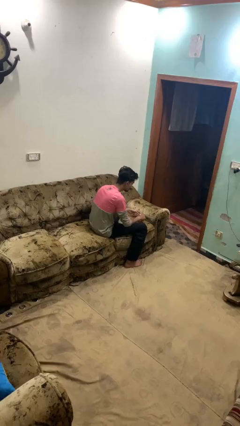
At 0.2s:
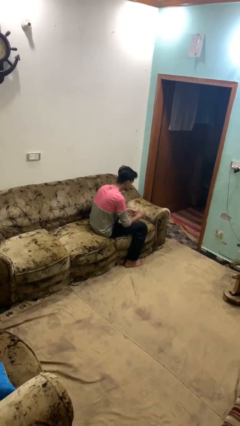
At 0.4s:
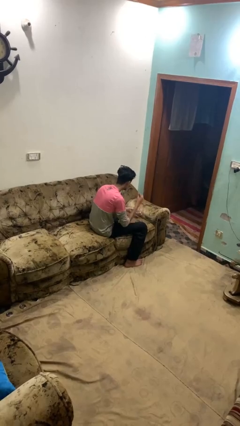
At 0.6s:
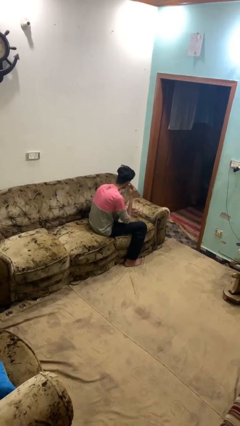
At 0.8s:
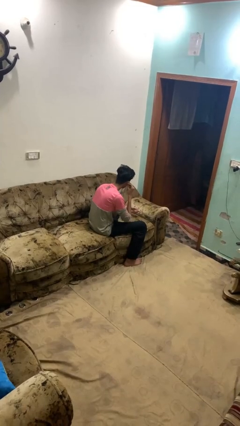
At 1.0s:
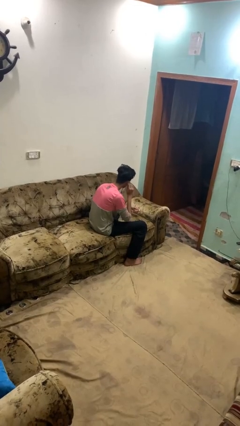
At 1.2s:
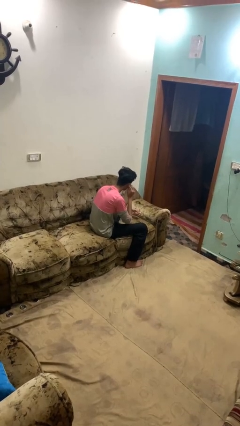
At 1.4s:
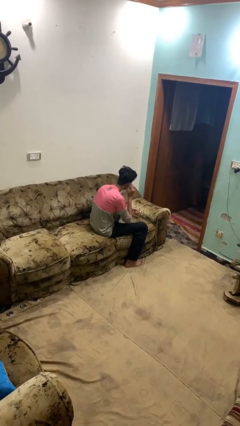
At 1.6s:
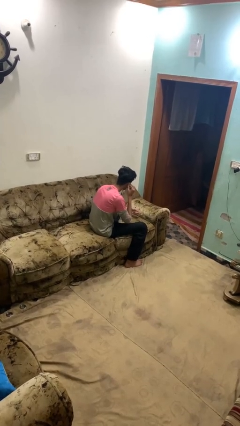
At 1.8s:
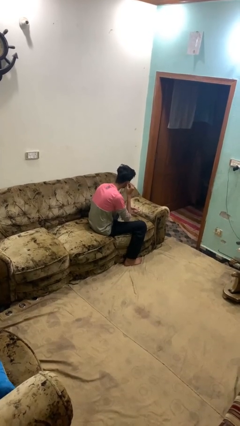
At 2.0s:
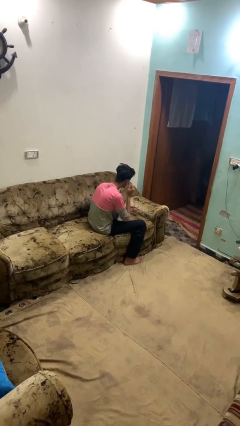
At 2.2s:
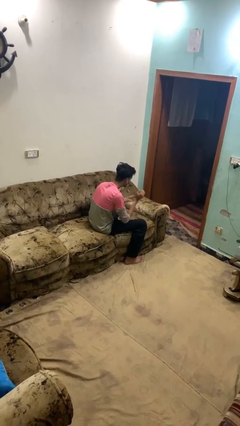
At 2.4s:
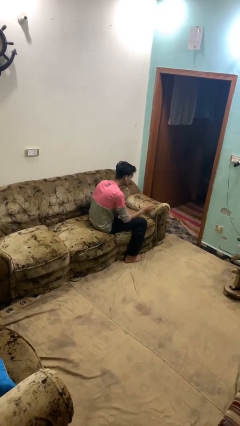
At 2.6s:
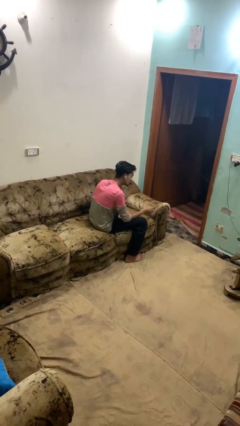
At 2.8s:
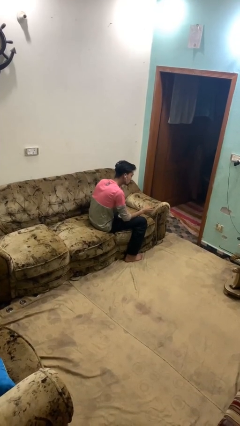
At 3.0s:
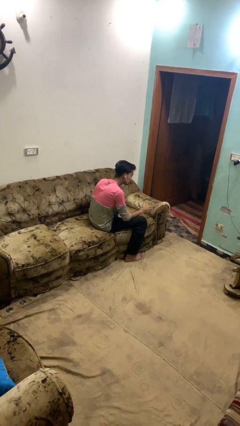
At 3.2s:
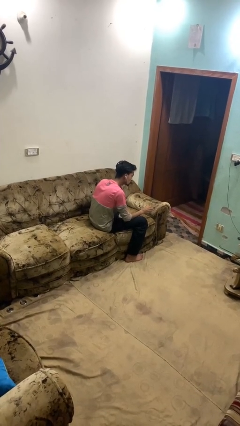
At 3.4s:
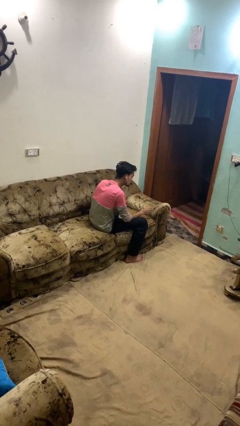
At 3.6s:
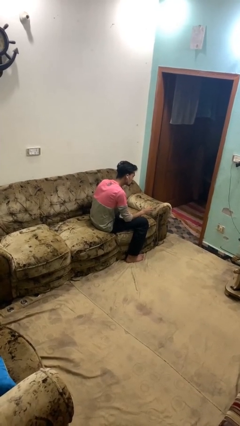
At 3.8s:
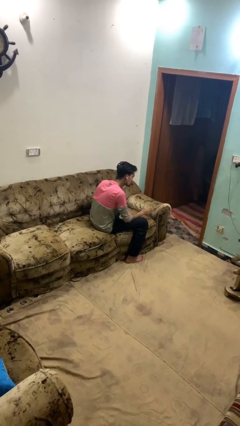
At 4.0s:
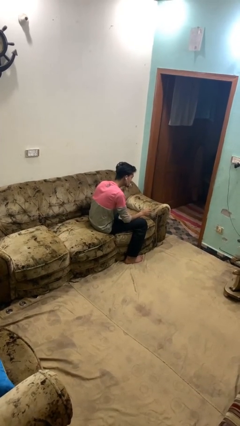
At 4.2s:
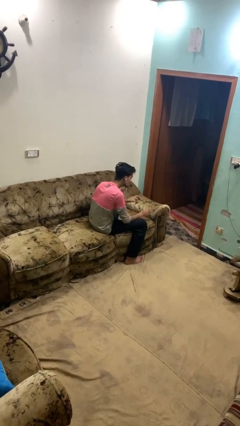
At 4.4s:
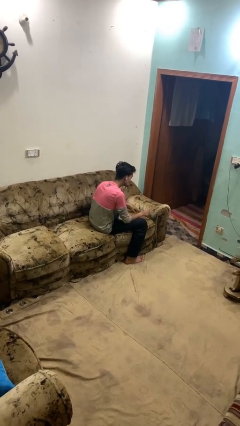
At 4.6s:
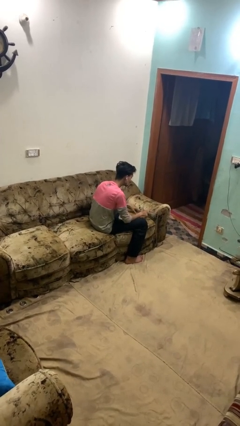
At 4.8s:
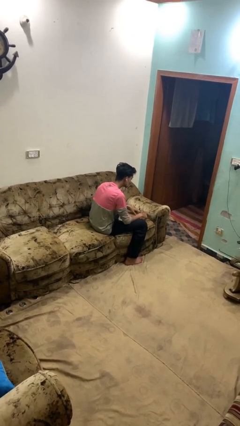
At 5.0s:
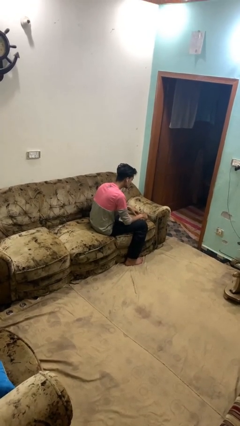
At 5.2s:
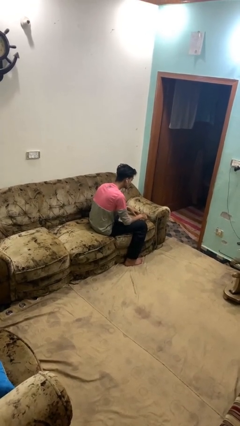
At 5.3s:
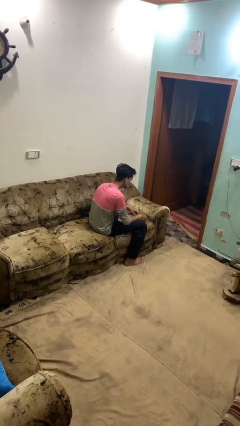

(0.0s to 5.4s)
person puts on headphones

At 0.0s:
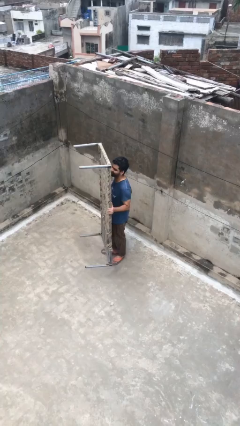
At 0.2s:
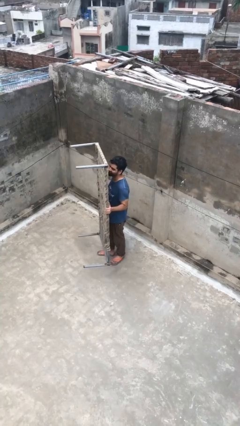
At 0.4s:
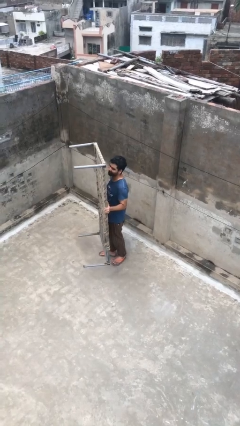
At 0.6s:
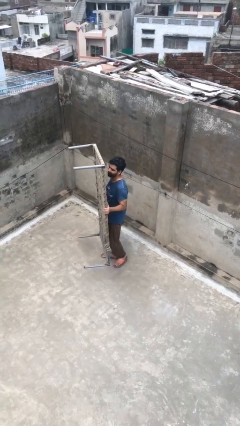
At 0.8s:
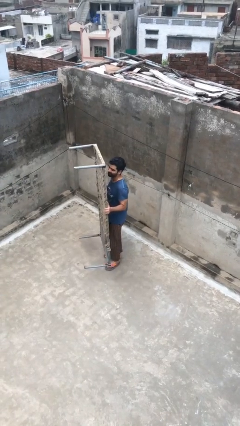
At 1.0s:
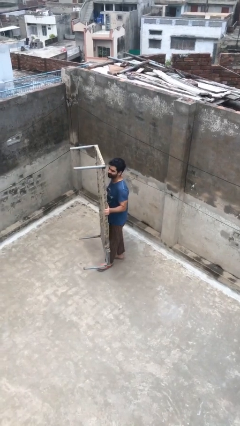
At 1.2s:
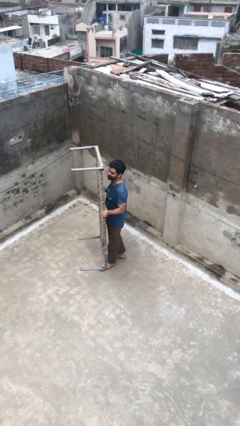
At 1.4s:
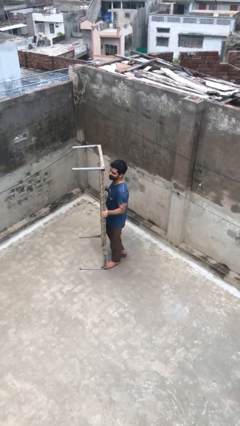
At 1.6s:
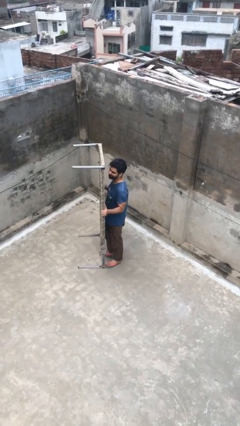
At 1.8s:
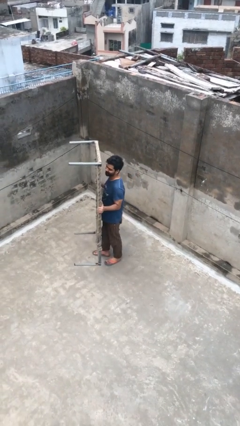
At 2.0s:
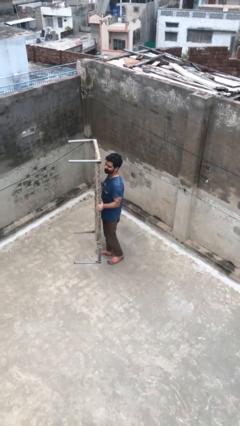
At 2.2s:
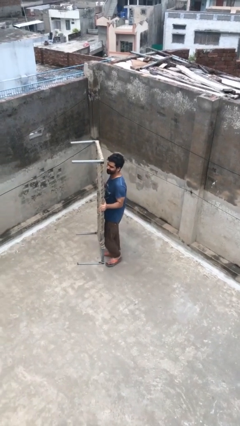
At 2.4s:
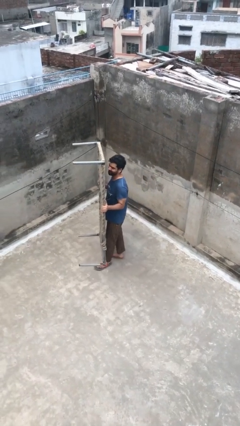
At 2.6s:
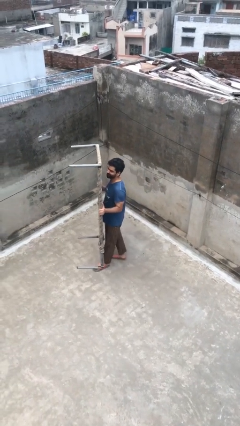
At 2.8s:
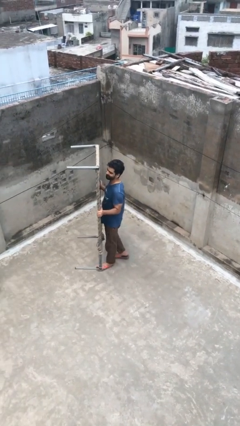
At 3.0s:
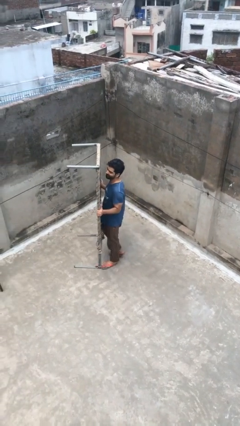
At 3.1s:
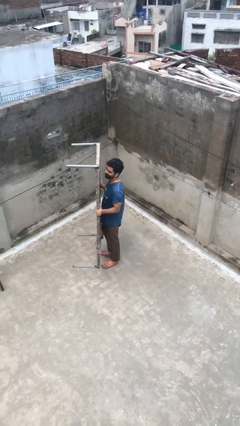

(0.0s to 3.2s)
person carries heavy object

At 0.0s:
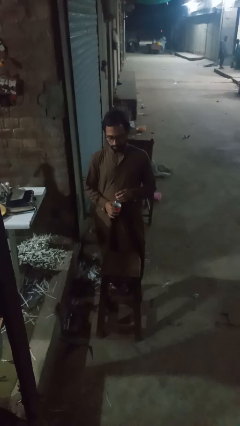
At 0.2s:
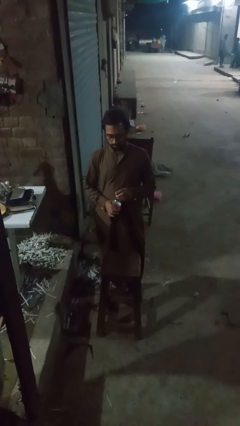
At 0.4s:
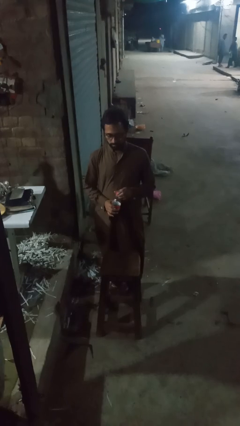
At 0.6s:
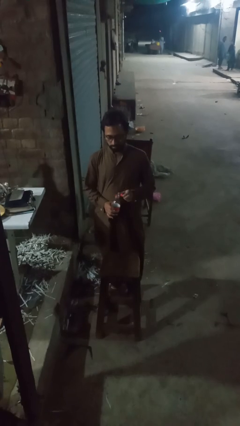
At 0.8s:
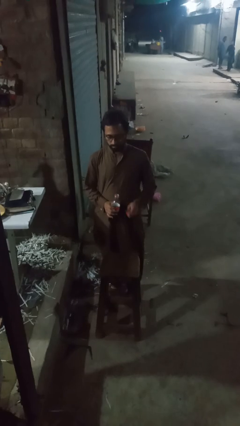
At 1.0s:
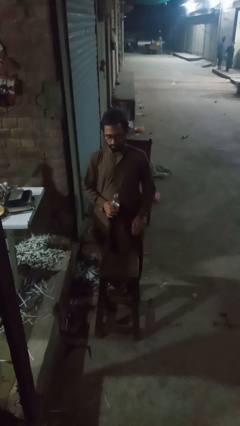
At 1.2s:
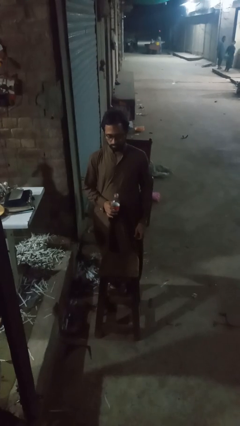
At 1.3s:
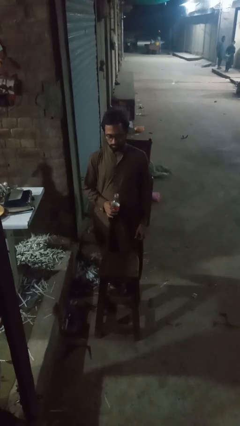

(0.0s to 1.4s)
person unscrews lid from bottle

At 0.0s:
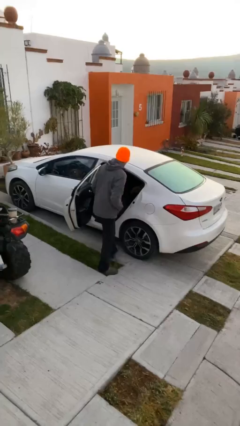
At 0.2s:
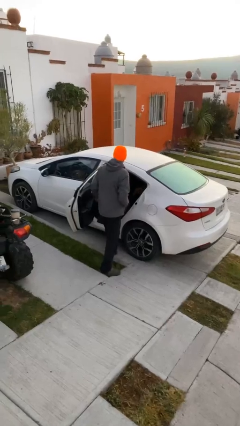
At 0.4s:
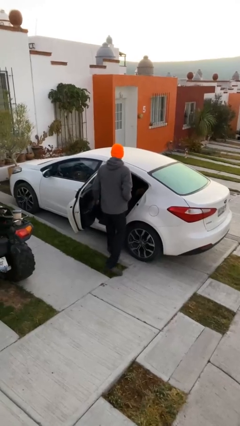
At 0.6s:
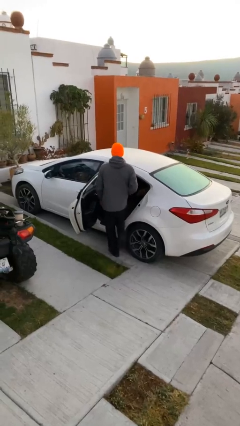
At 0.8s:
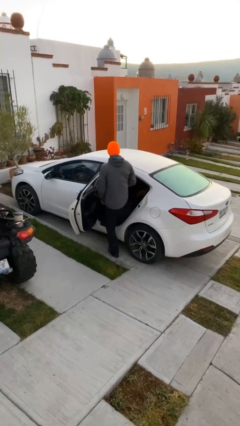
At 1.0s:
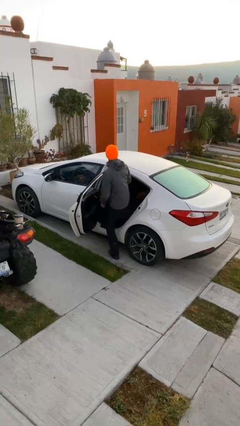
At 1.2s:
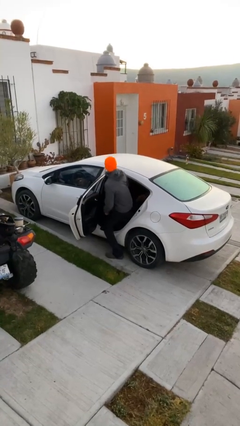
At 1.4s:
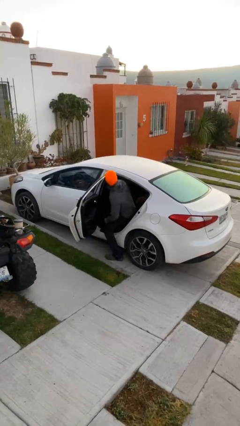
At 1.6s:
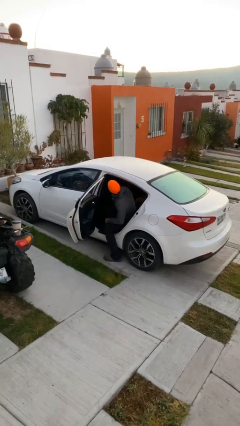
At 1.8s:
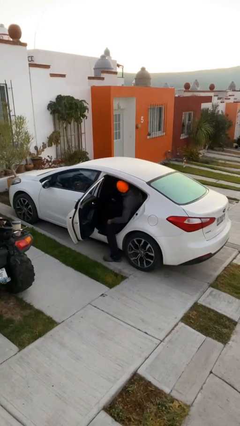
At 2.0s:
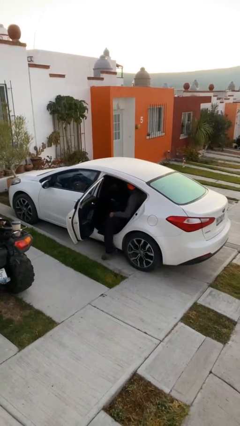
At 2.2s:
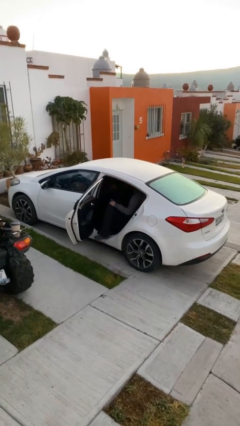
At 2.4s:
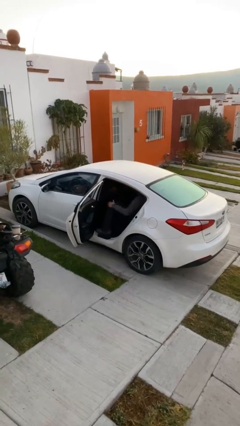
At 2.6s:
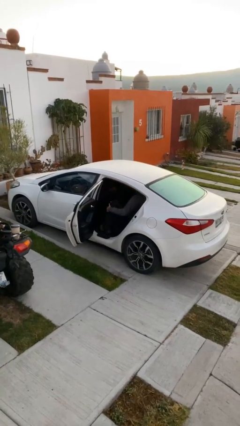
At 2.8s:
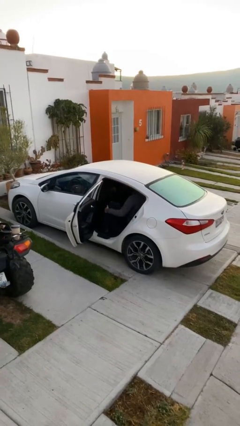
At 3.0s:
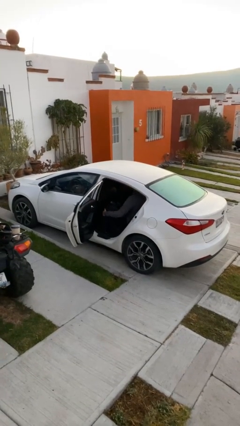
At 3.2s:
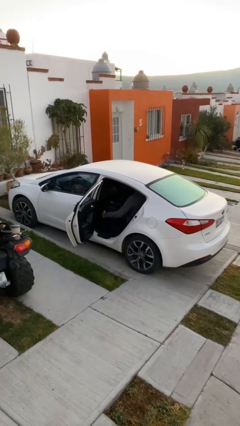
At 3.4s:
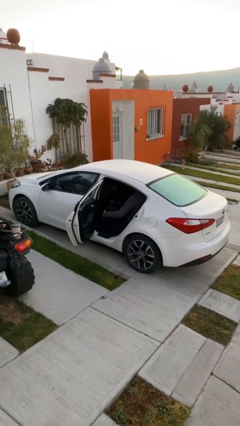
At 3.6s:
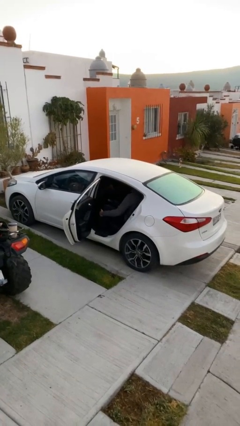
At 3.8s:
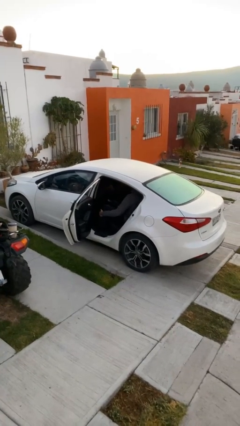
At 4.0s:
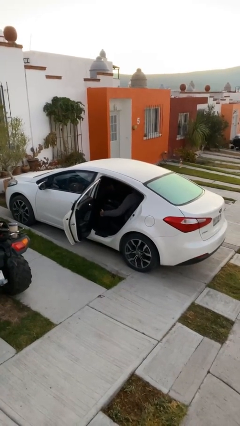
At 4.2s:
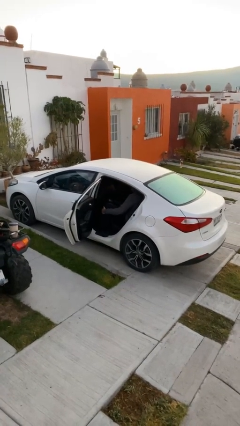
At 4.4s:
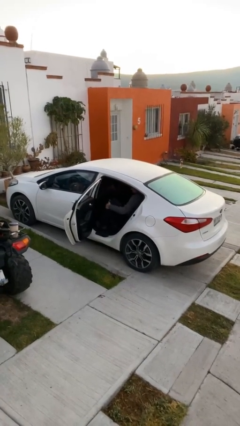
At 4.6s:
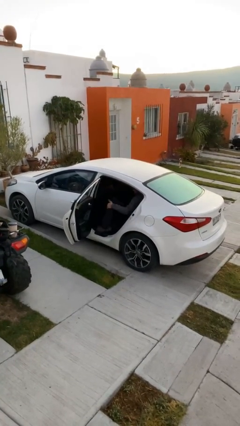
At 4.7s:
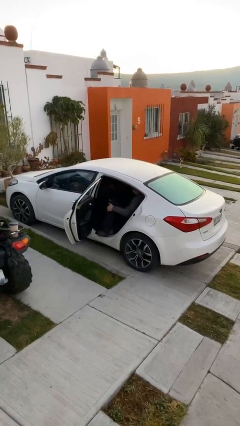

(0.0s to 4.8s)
person enters car

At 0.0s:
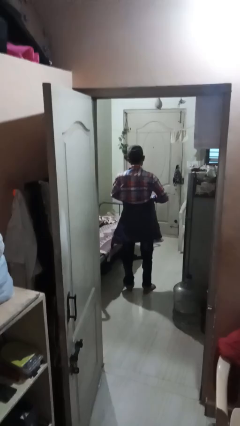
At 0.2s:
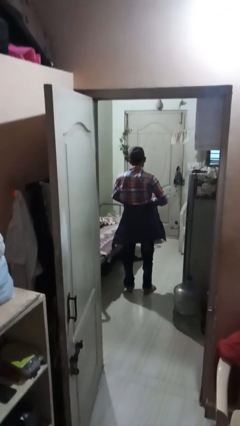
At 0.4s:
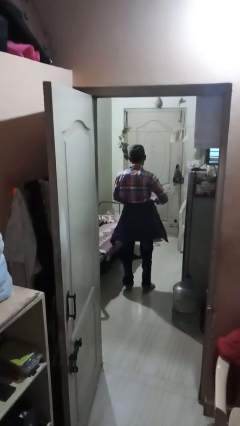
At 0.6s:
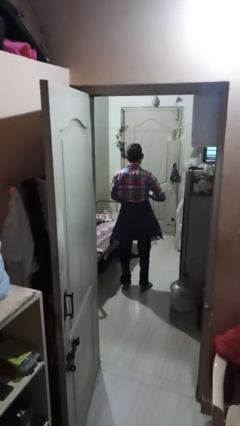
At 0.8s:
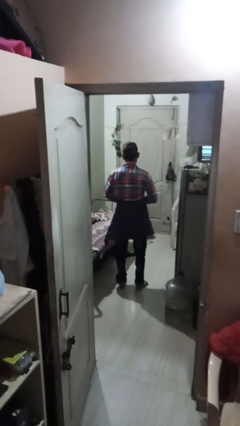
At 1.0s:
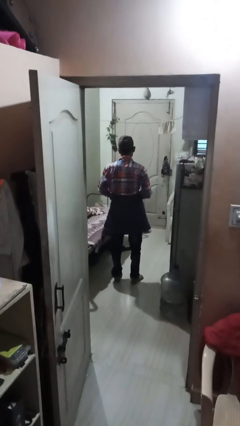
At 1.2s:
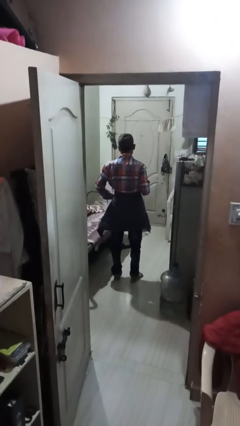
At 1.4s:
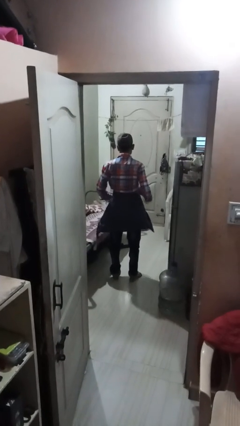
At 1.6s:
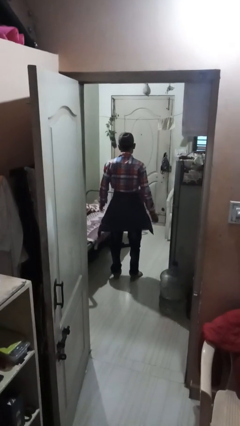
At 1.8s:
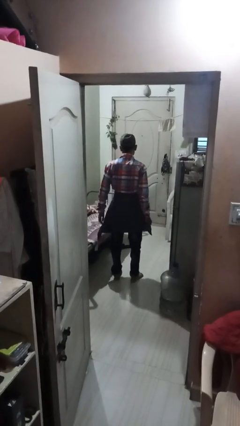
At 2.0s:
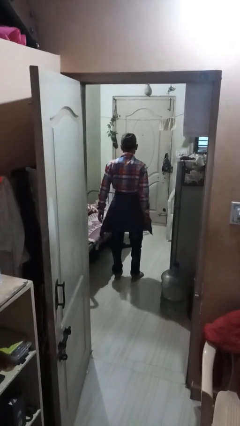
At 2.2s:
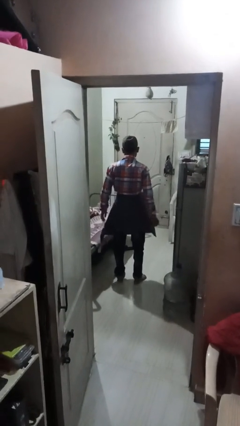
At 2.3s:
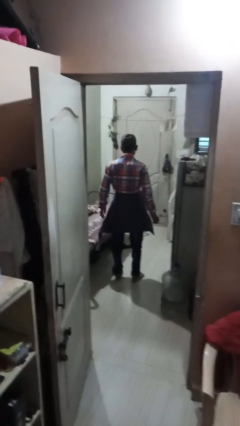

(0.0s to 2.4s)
person ties jacket around waist

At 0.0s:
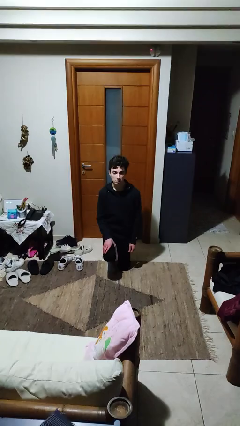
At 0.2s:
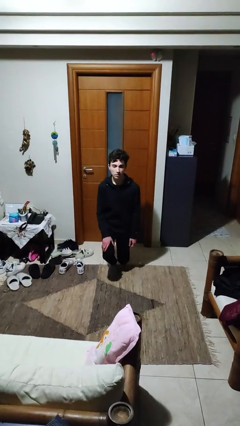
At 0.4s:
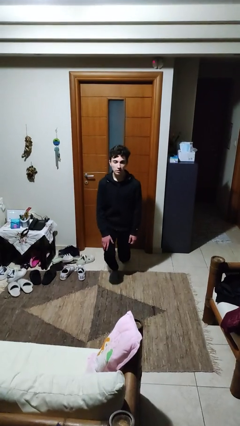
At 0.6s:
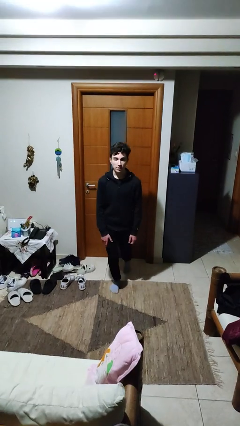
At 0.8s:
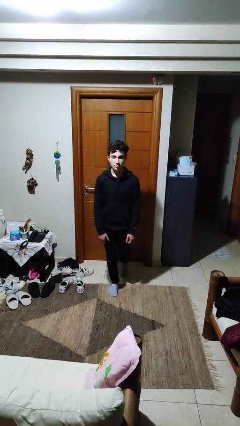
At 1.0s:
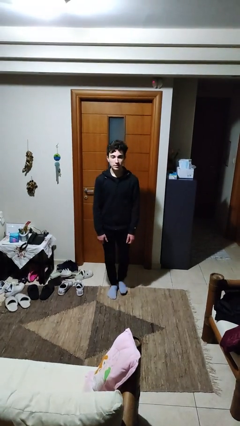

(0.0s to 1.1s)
person stands up from floor
